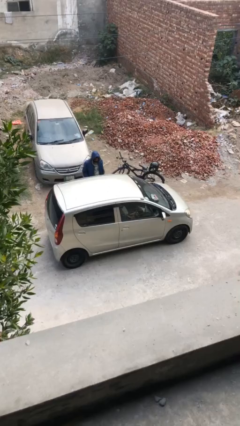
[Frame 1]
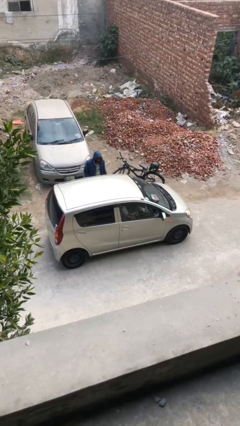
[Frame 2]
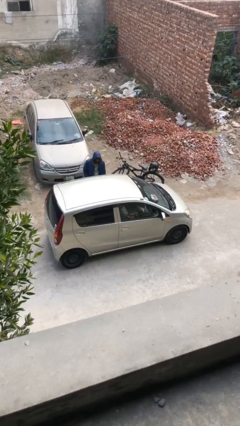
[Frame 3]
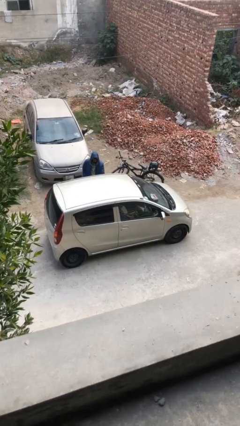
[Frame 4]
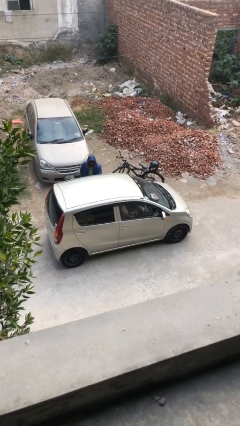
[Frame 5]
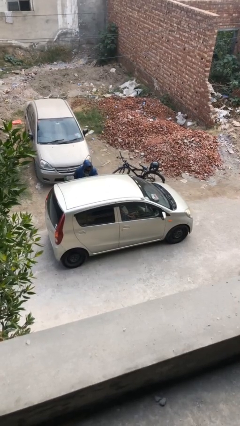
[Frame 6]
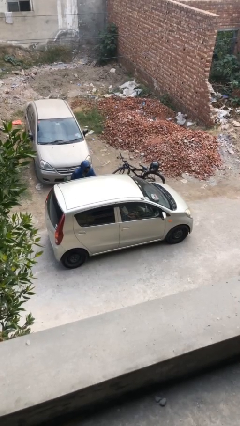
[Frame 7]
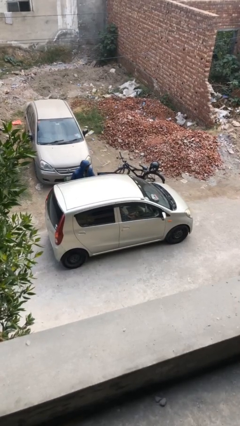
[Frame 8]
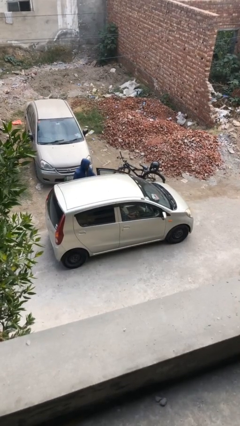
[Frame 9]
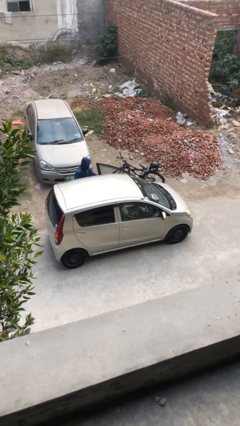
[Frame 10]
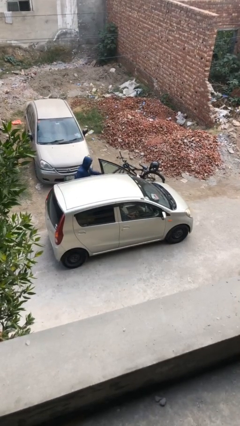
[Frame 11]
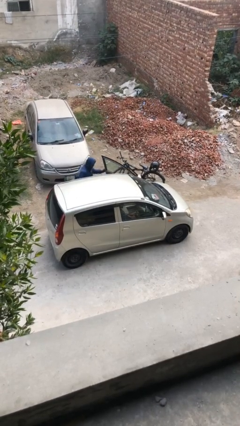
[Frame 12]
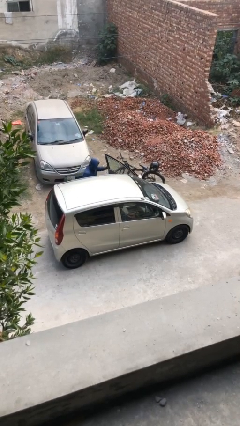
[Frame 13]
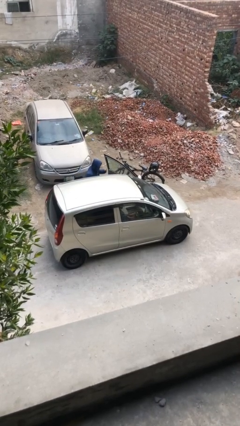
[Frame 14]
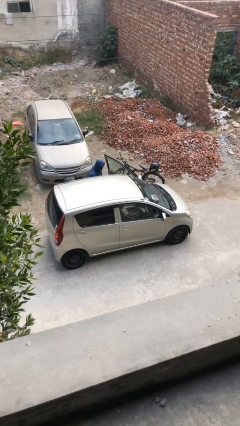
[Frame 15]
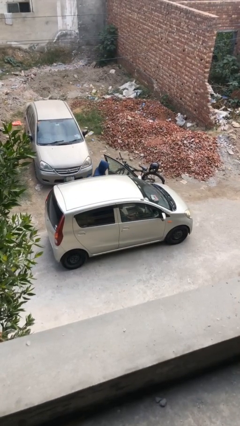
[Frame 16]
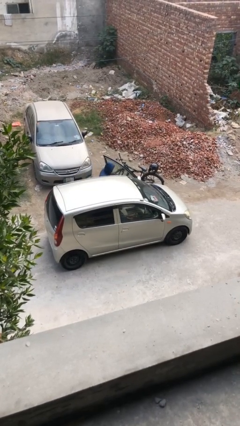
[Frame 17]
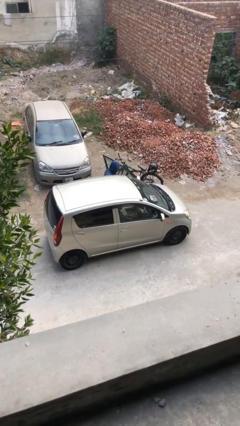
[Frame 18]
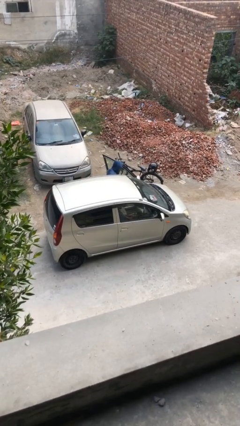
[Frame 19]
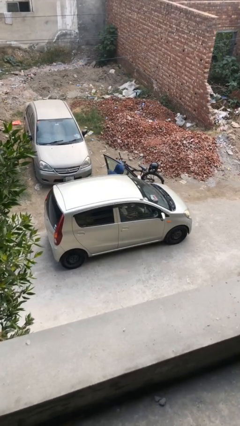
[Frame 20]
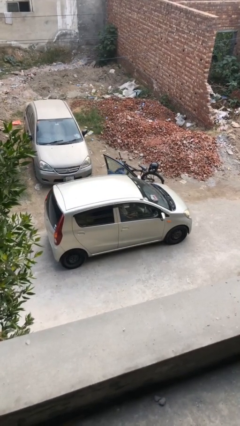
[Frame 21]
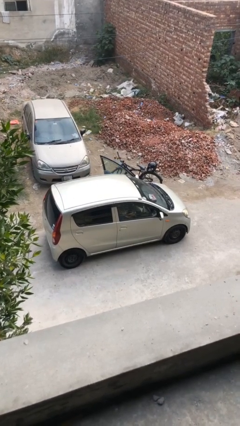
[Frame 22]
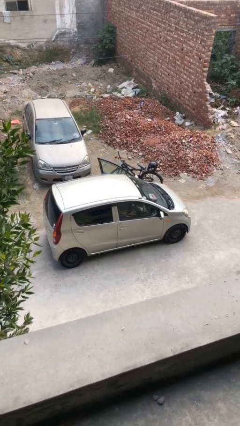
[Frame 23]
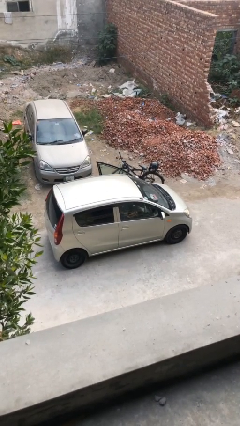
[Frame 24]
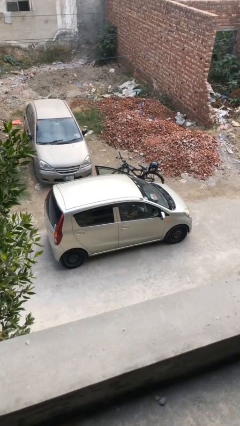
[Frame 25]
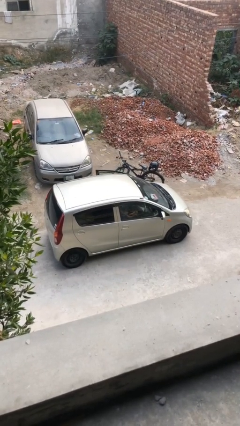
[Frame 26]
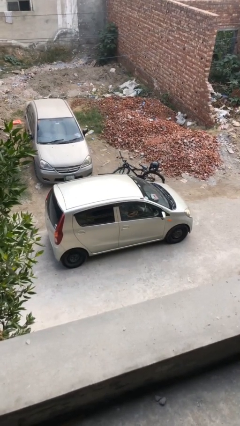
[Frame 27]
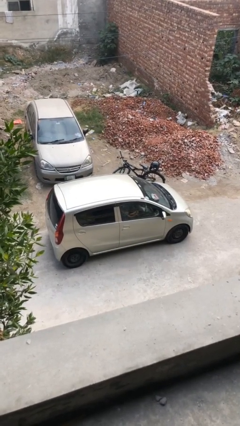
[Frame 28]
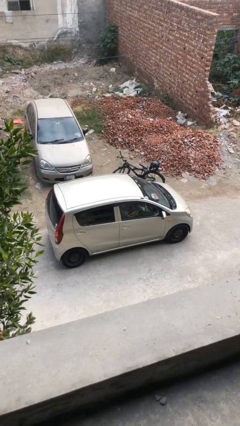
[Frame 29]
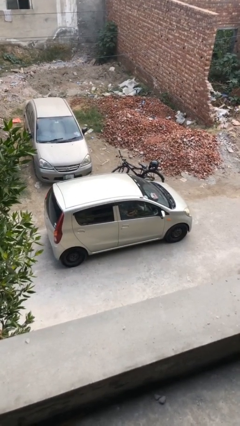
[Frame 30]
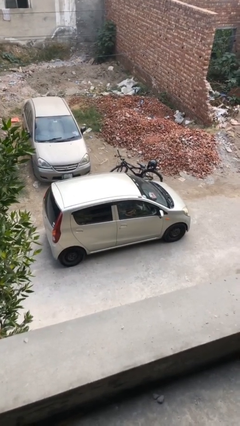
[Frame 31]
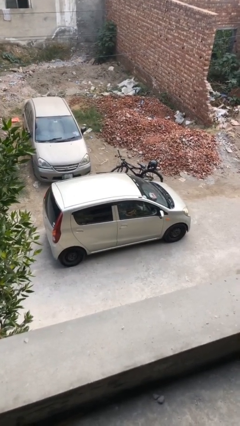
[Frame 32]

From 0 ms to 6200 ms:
car picks up person

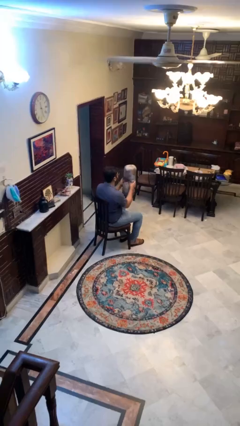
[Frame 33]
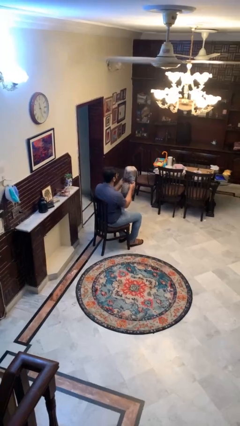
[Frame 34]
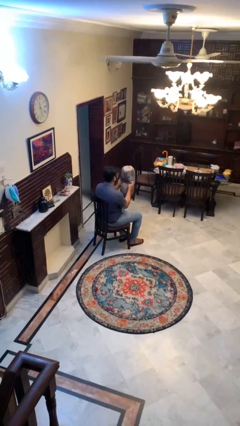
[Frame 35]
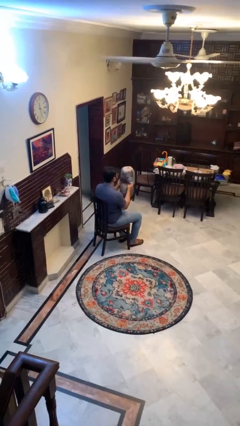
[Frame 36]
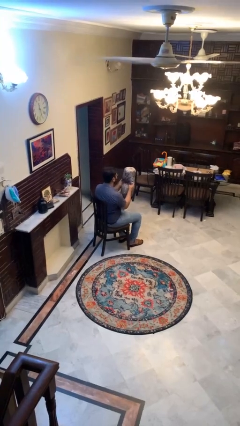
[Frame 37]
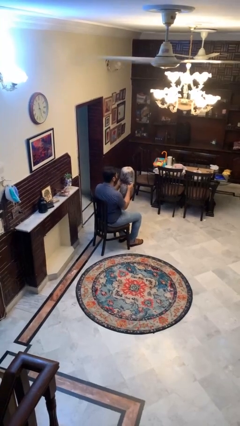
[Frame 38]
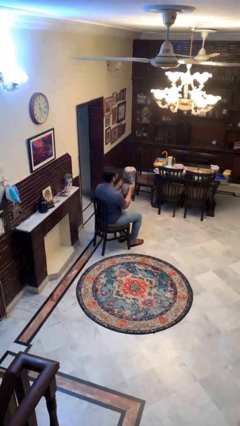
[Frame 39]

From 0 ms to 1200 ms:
person squeezes object

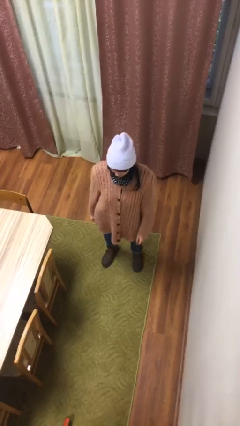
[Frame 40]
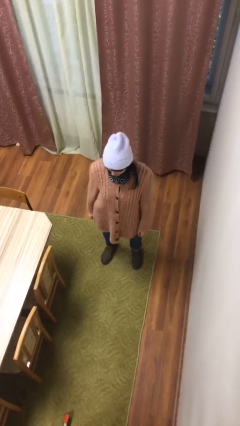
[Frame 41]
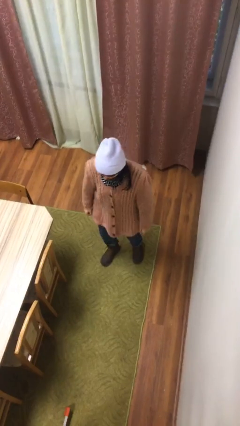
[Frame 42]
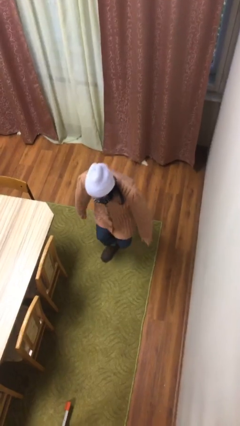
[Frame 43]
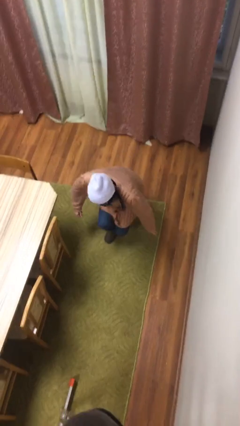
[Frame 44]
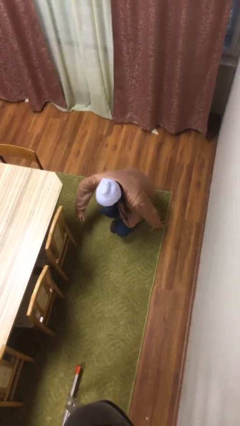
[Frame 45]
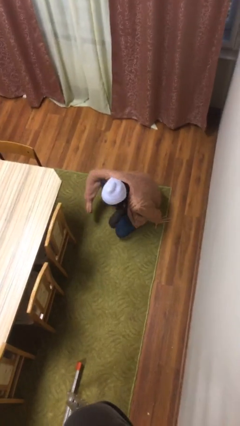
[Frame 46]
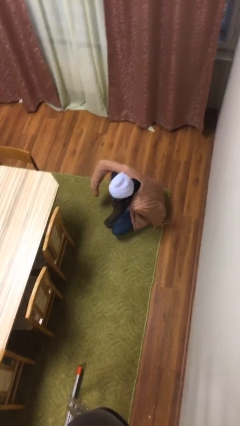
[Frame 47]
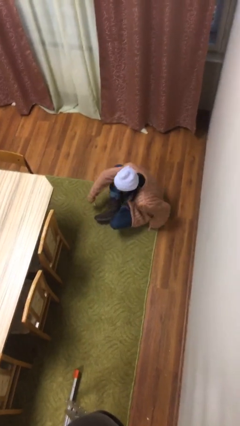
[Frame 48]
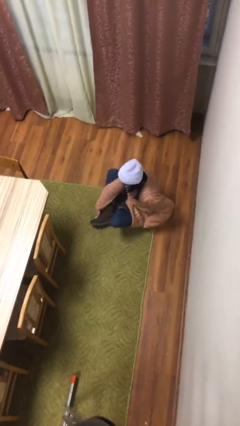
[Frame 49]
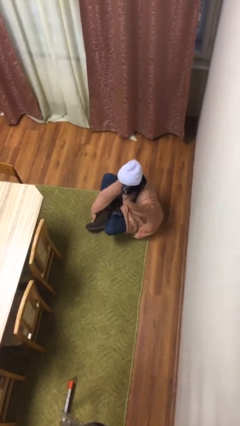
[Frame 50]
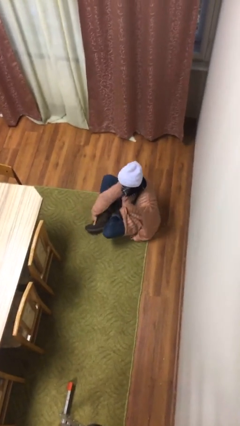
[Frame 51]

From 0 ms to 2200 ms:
person sits down

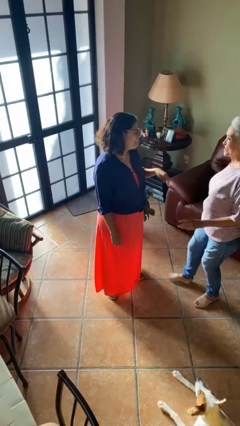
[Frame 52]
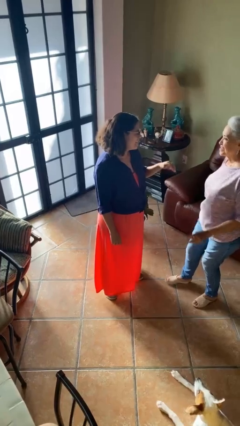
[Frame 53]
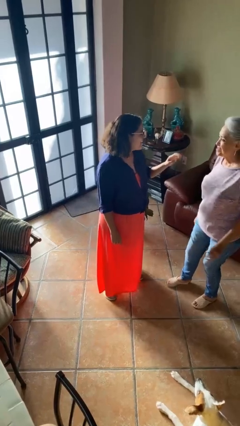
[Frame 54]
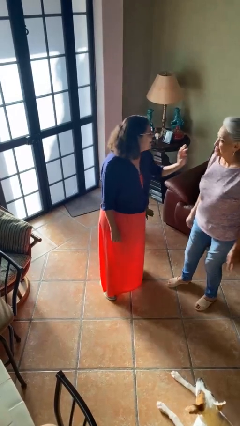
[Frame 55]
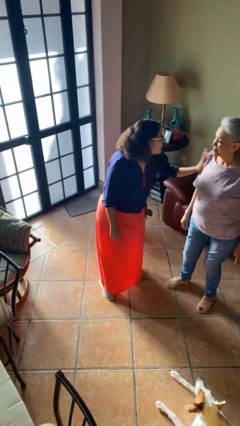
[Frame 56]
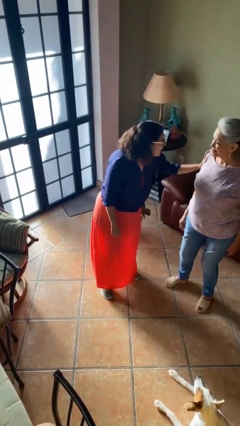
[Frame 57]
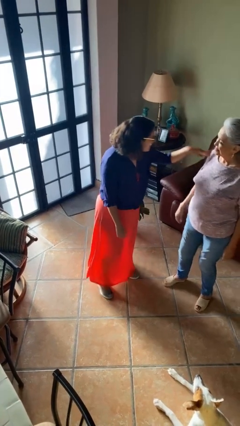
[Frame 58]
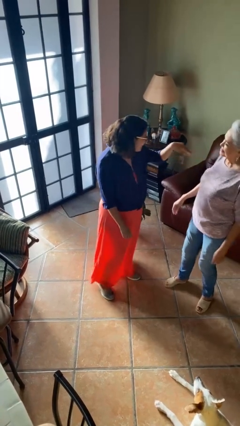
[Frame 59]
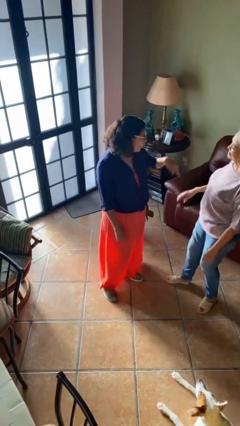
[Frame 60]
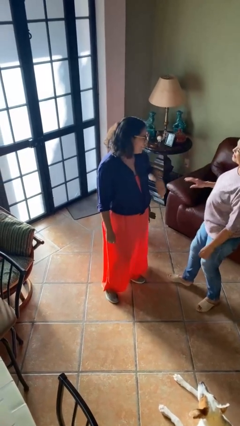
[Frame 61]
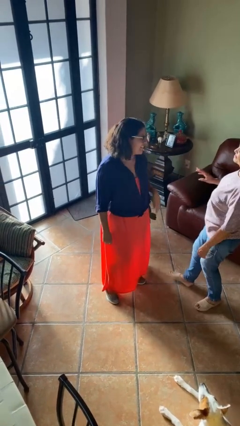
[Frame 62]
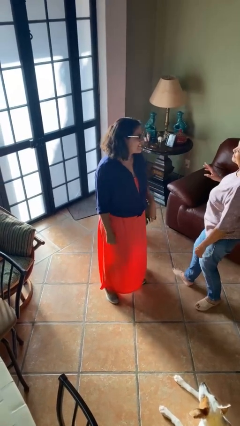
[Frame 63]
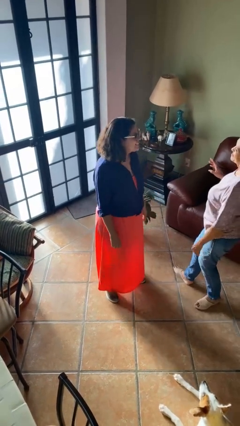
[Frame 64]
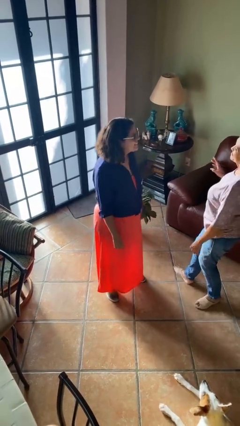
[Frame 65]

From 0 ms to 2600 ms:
person shoves person

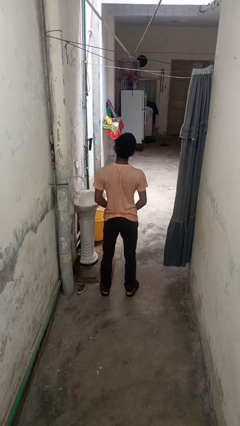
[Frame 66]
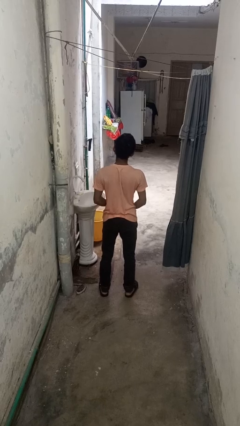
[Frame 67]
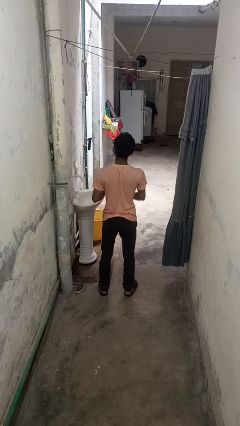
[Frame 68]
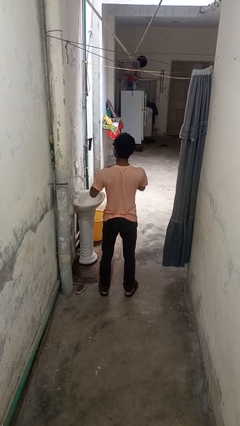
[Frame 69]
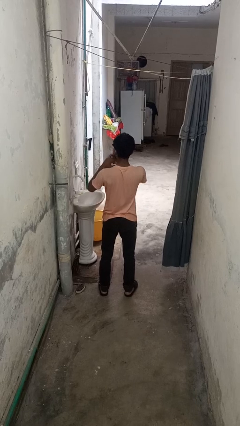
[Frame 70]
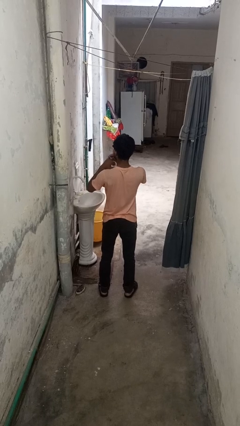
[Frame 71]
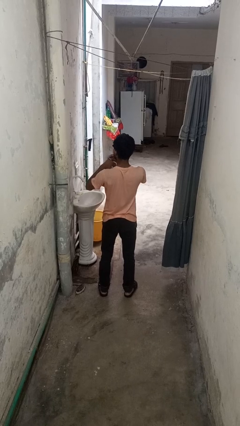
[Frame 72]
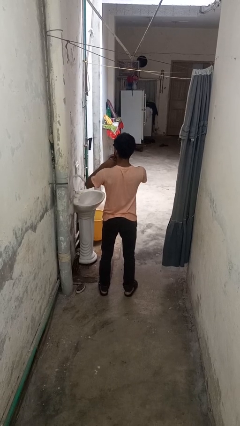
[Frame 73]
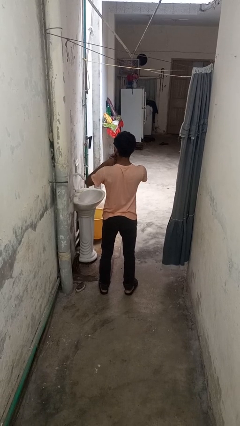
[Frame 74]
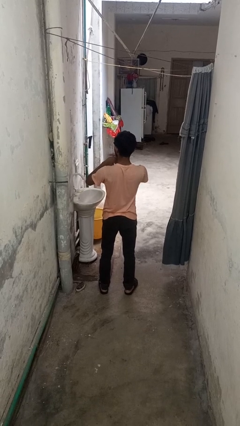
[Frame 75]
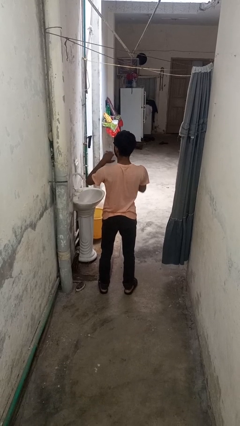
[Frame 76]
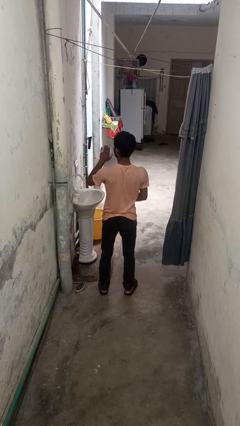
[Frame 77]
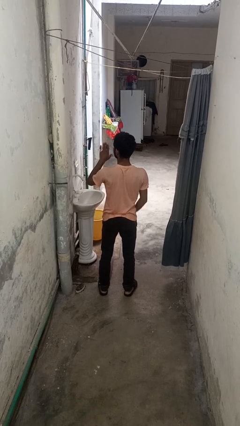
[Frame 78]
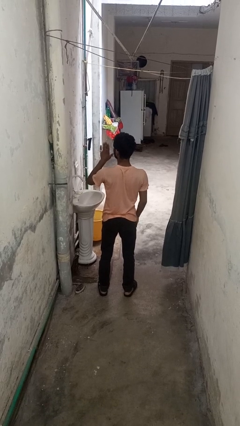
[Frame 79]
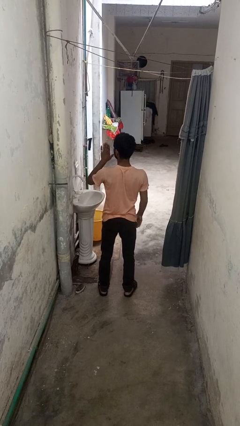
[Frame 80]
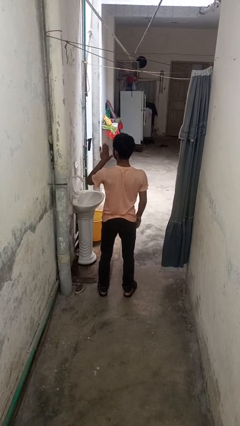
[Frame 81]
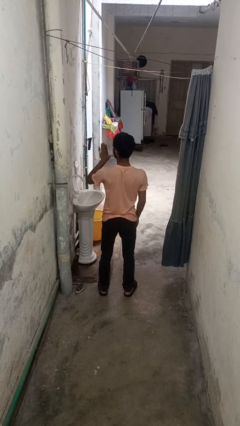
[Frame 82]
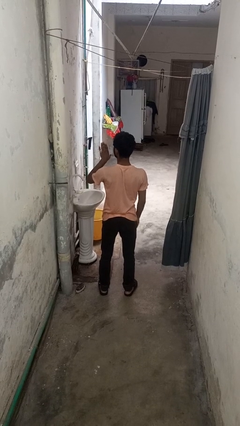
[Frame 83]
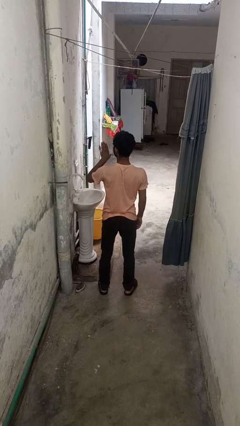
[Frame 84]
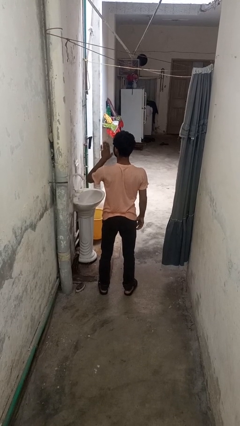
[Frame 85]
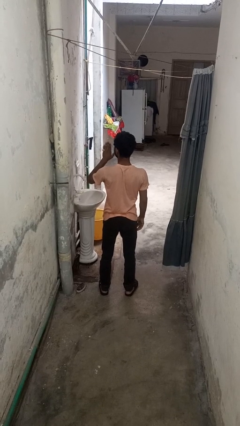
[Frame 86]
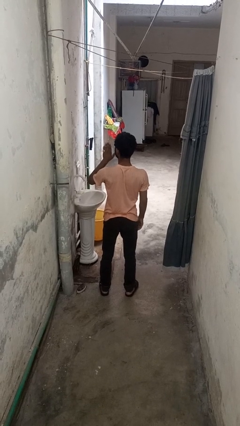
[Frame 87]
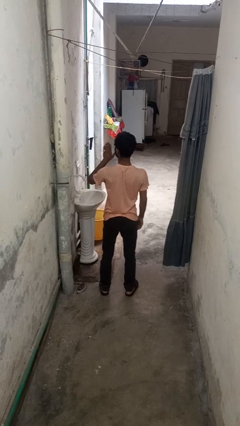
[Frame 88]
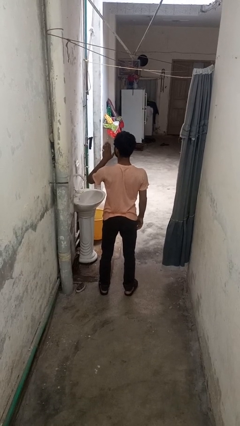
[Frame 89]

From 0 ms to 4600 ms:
person puts on ring

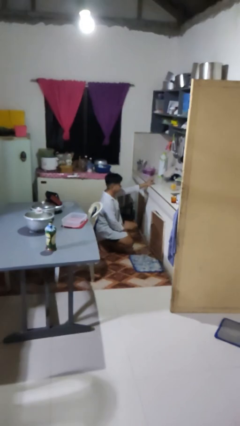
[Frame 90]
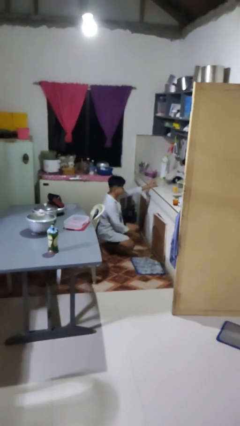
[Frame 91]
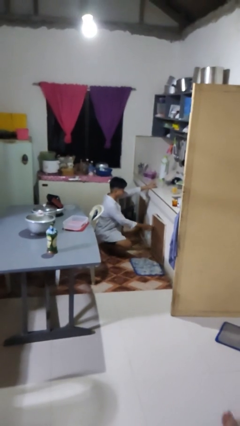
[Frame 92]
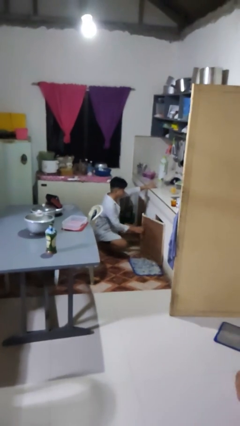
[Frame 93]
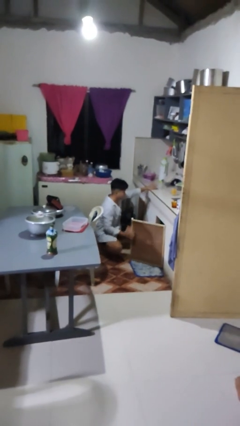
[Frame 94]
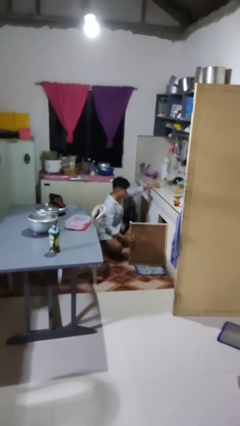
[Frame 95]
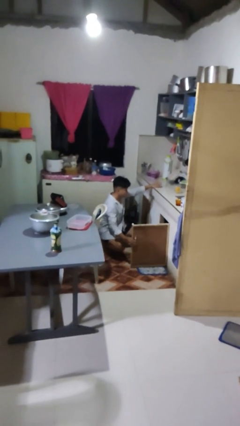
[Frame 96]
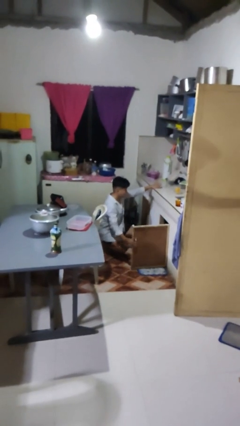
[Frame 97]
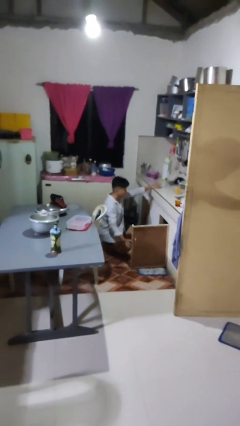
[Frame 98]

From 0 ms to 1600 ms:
person opens cabinet
